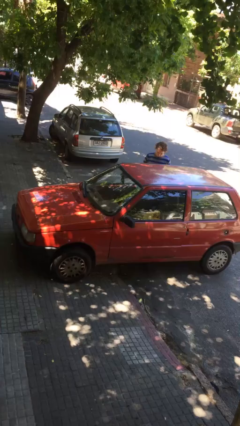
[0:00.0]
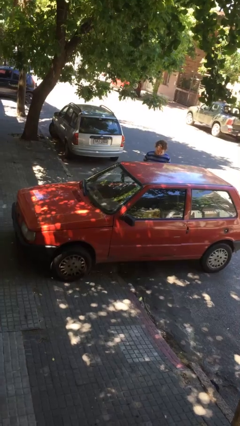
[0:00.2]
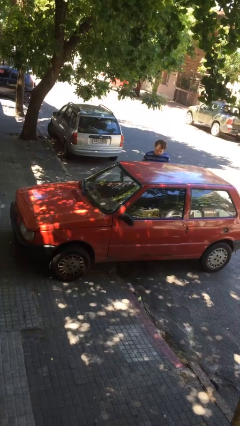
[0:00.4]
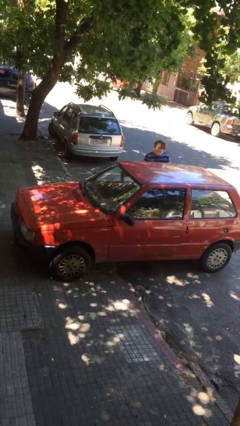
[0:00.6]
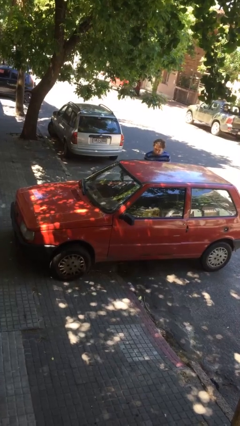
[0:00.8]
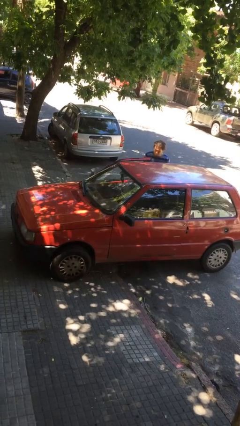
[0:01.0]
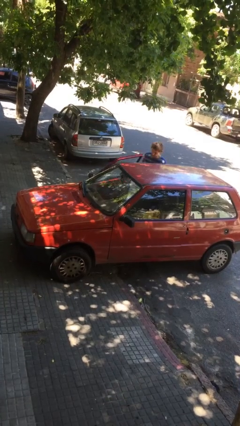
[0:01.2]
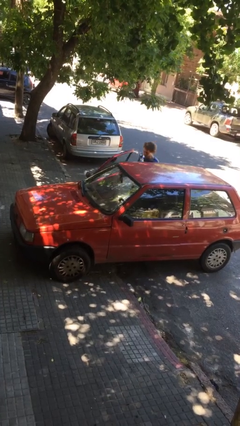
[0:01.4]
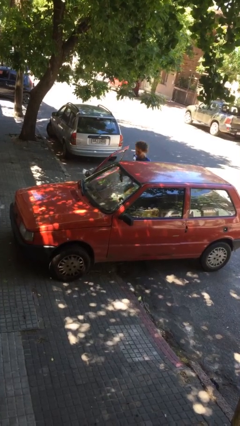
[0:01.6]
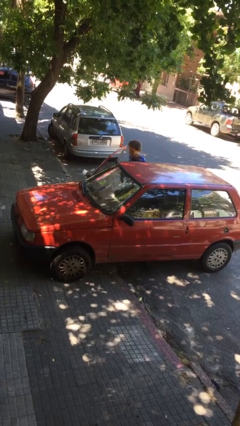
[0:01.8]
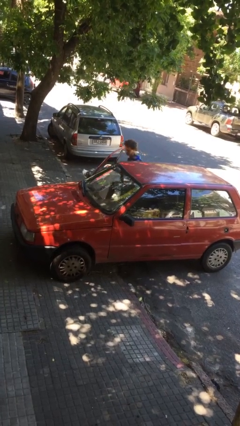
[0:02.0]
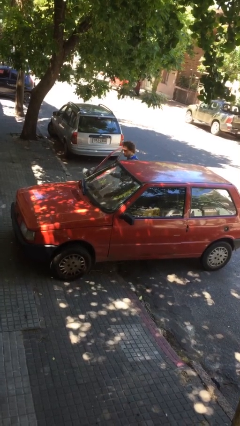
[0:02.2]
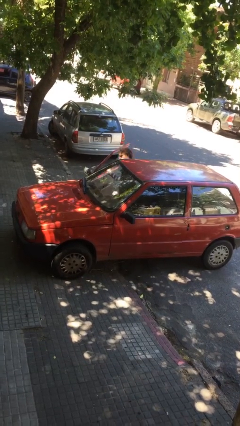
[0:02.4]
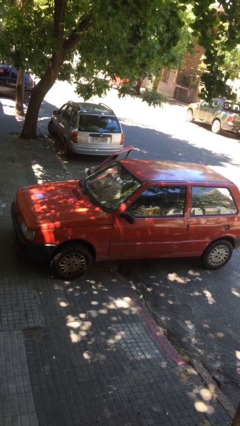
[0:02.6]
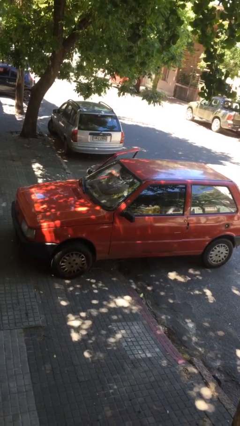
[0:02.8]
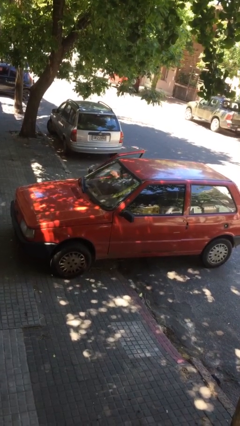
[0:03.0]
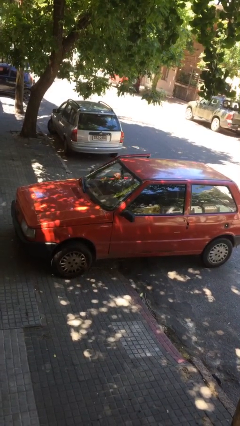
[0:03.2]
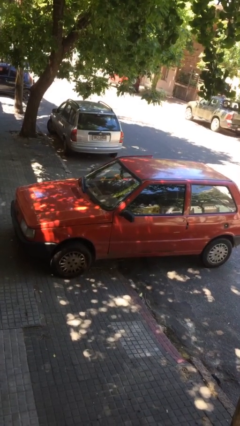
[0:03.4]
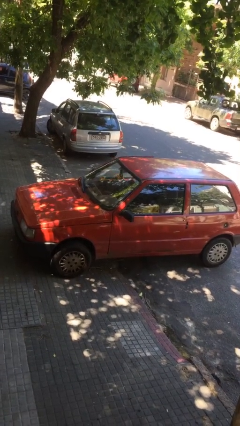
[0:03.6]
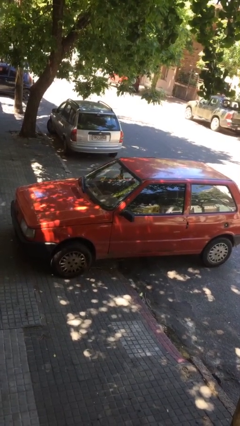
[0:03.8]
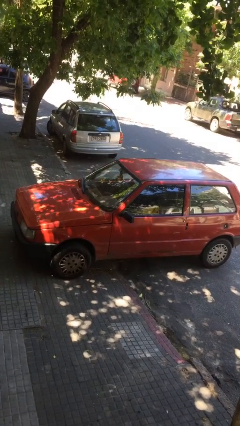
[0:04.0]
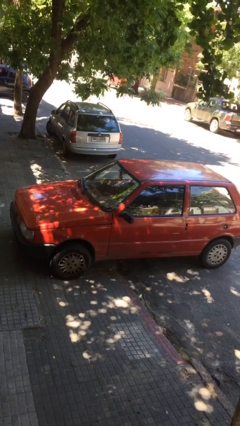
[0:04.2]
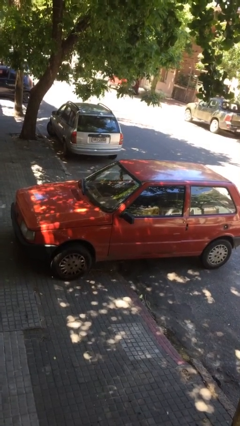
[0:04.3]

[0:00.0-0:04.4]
car picks up person

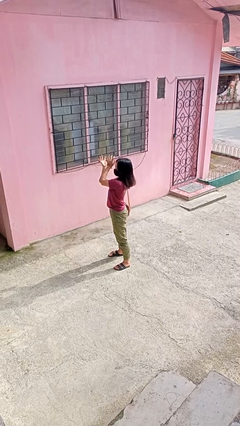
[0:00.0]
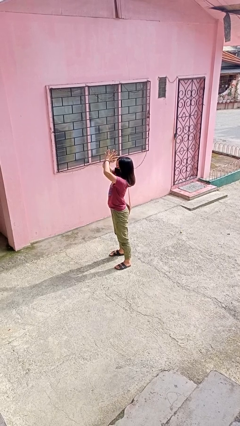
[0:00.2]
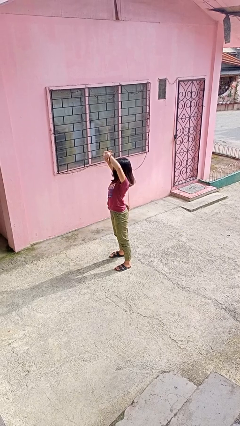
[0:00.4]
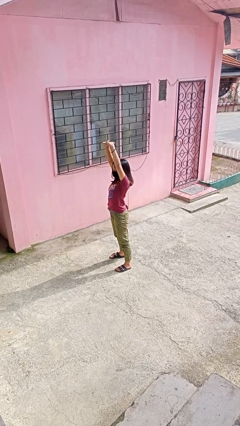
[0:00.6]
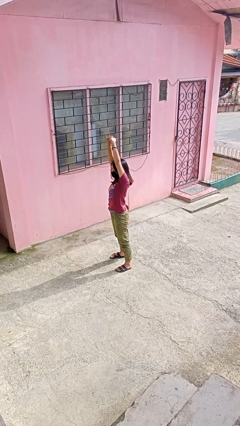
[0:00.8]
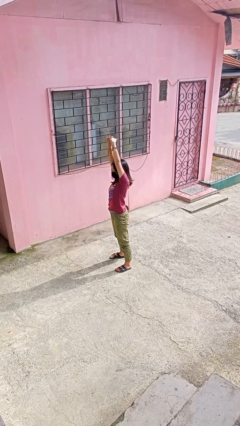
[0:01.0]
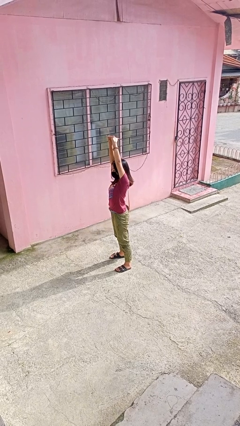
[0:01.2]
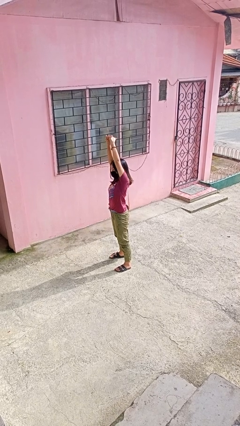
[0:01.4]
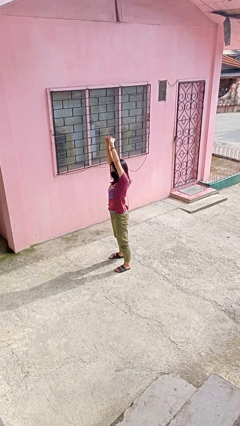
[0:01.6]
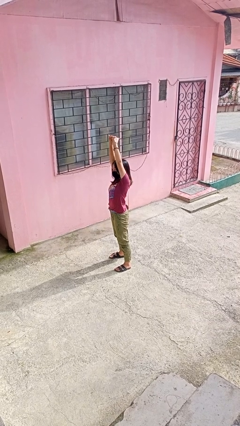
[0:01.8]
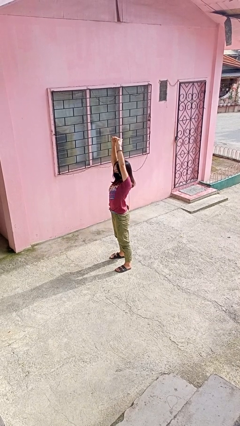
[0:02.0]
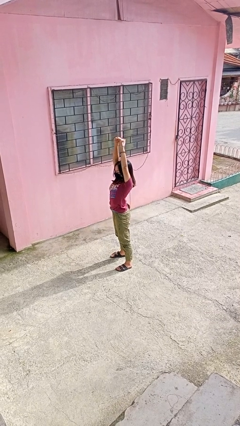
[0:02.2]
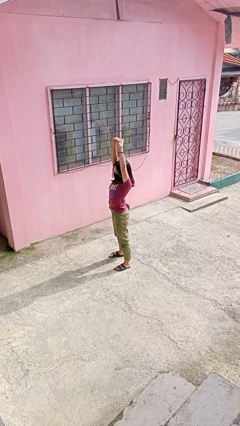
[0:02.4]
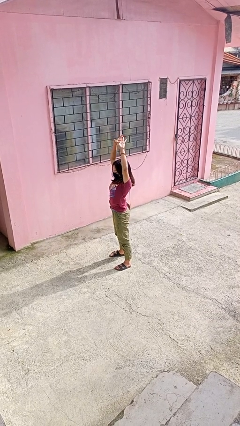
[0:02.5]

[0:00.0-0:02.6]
person stretches arms over head

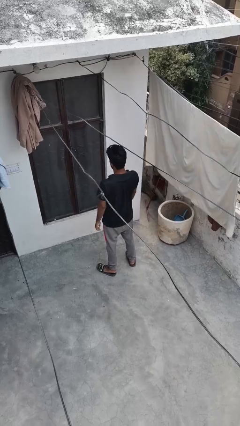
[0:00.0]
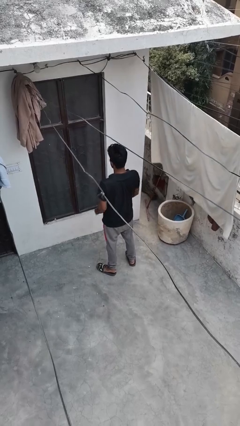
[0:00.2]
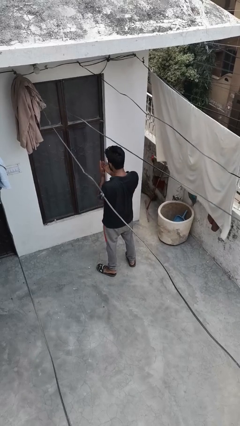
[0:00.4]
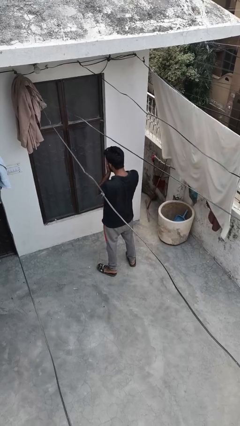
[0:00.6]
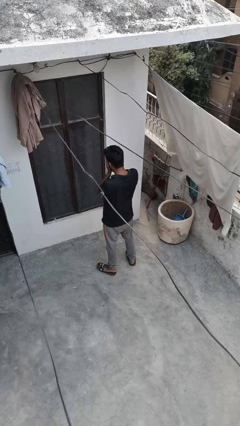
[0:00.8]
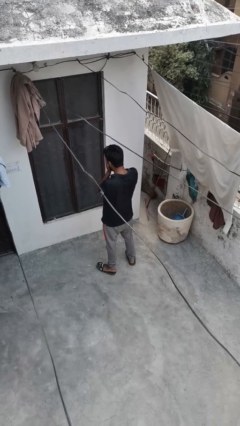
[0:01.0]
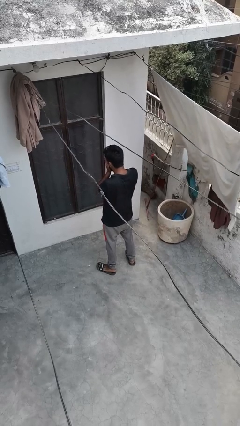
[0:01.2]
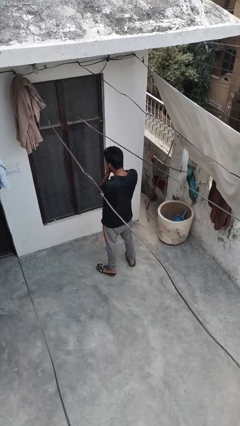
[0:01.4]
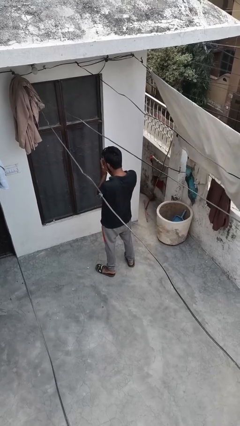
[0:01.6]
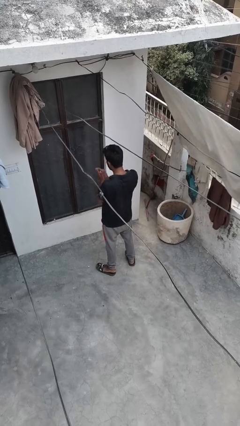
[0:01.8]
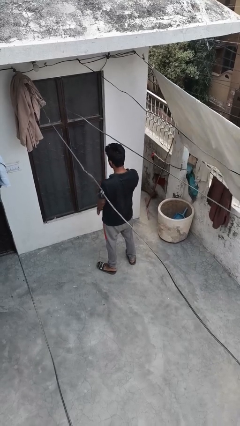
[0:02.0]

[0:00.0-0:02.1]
person covers face with hands

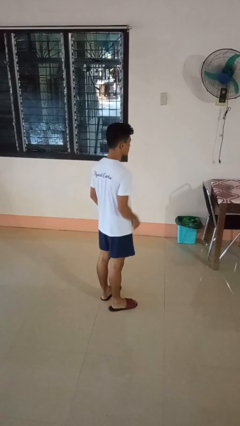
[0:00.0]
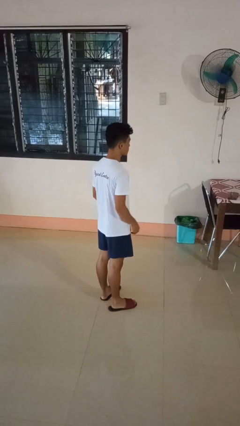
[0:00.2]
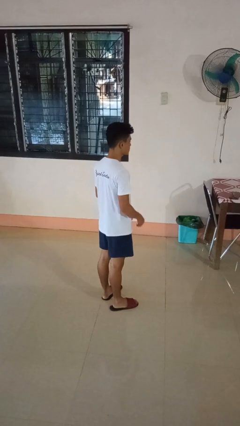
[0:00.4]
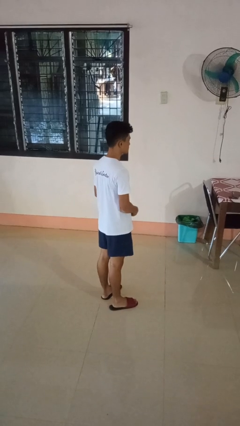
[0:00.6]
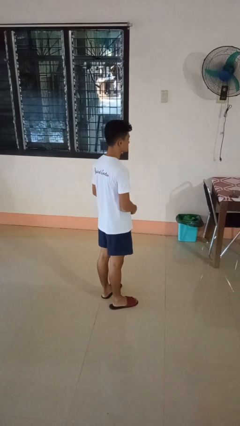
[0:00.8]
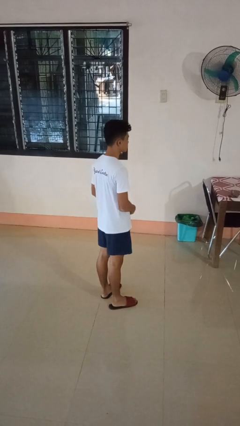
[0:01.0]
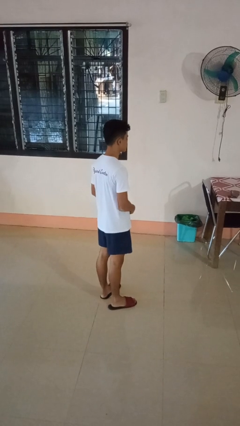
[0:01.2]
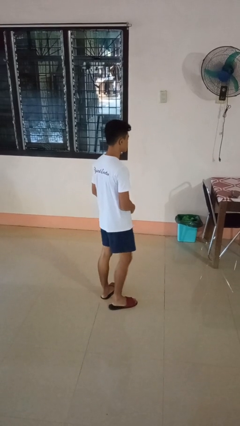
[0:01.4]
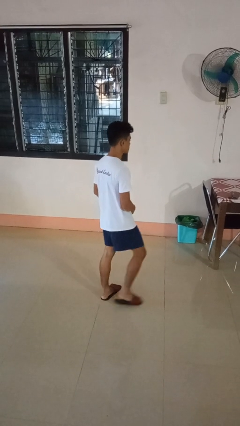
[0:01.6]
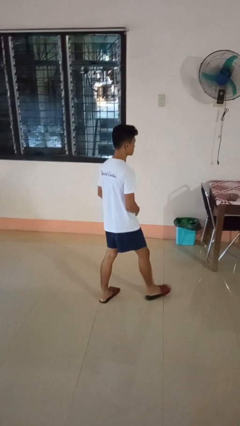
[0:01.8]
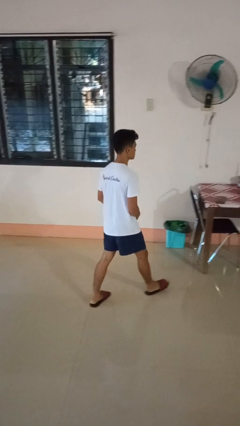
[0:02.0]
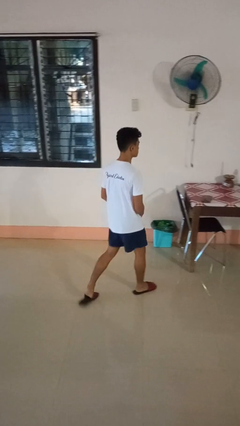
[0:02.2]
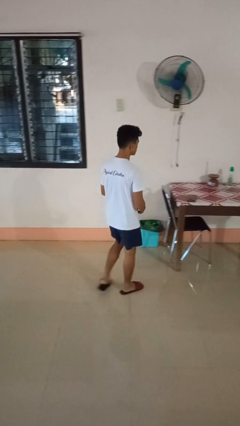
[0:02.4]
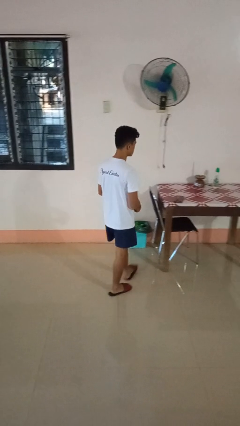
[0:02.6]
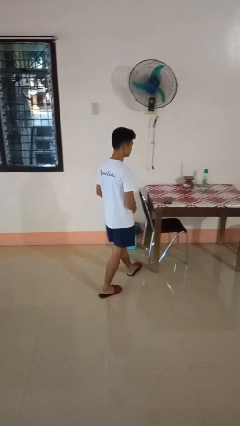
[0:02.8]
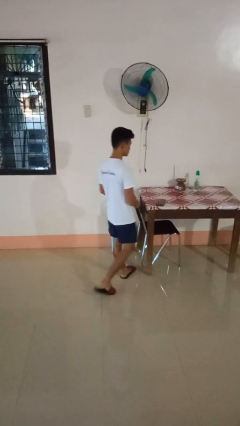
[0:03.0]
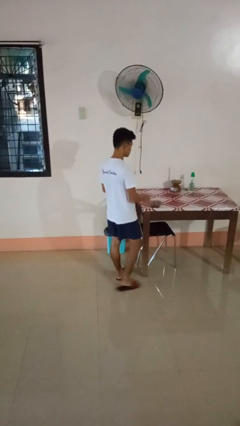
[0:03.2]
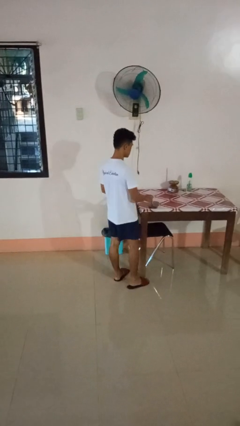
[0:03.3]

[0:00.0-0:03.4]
person throws object on table

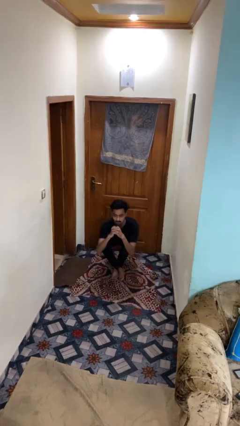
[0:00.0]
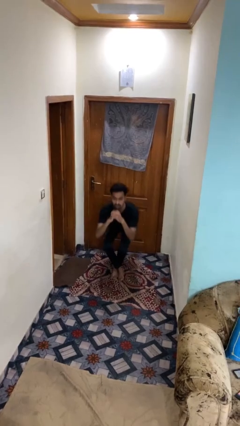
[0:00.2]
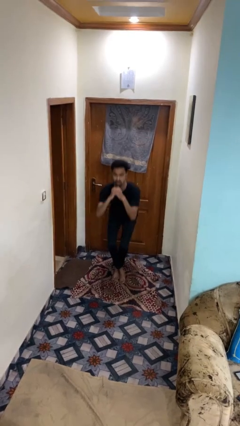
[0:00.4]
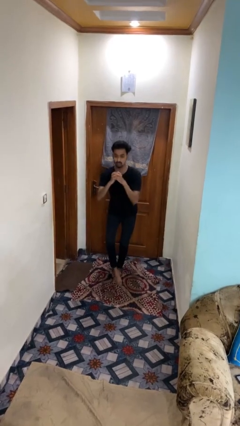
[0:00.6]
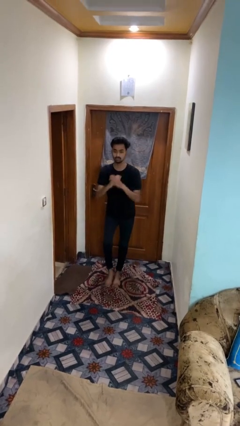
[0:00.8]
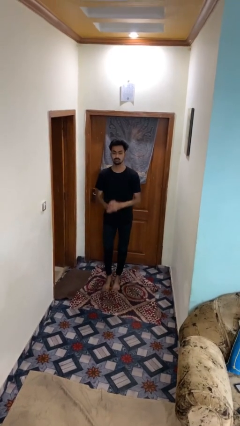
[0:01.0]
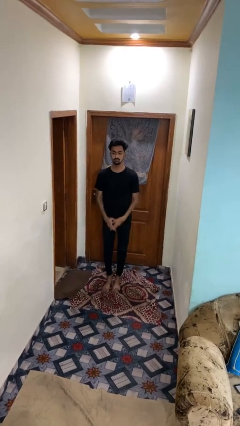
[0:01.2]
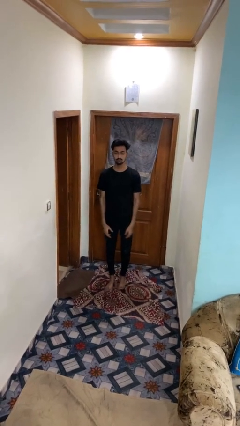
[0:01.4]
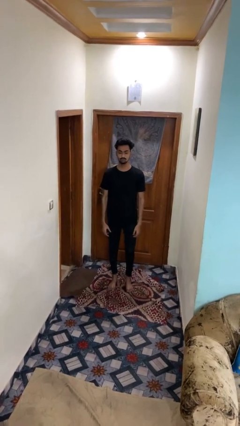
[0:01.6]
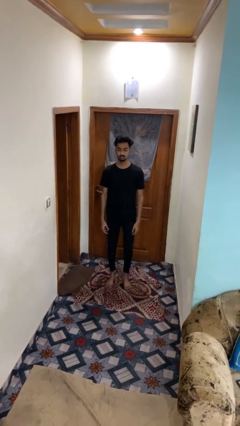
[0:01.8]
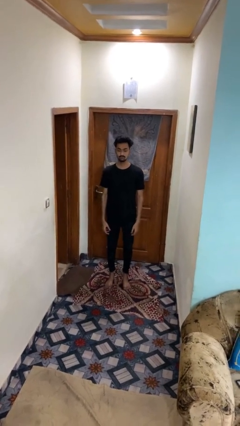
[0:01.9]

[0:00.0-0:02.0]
person stands up from floor

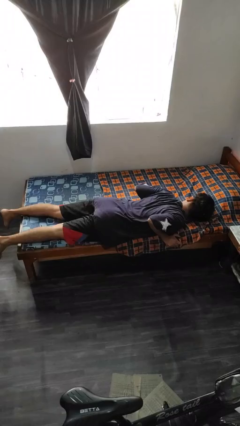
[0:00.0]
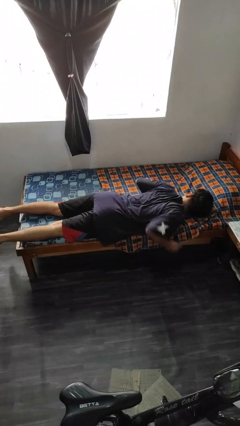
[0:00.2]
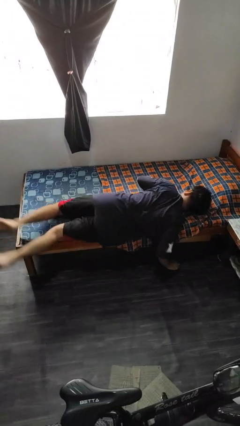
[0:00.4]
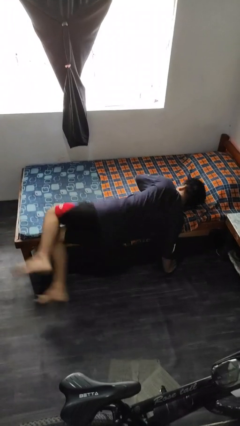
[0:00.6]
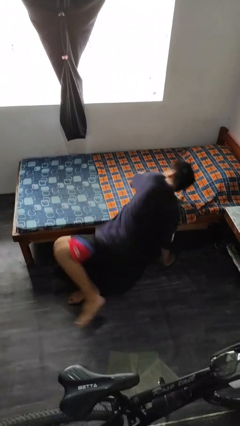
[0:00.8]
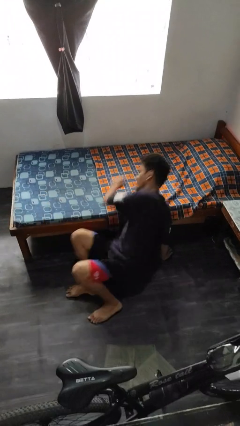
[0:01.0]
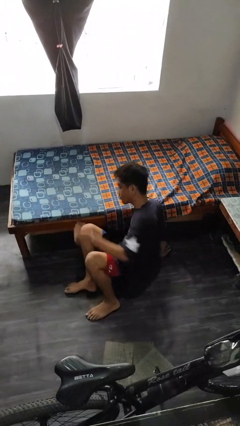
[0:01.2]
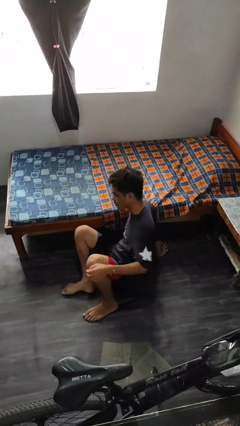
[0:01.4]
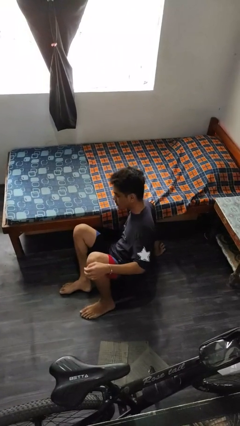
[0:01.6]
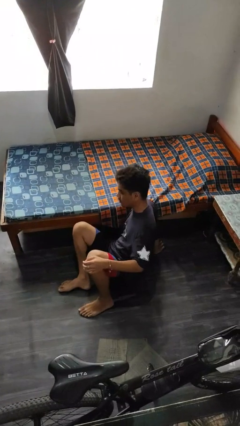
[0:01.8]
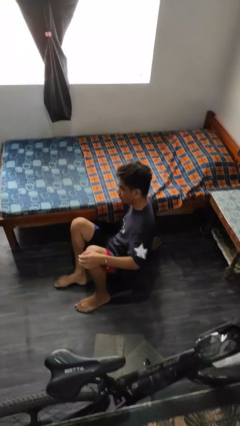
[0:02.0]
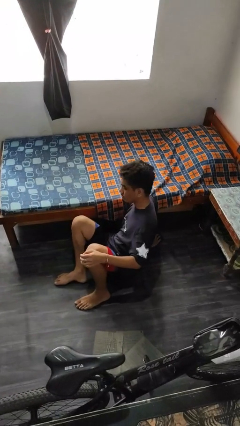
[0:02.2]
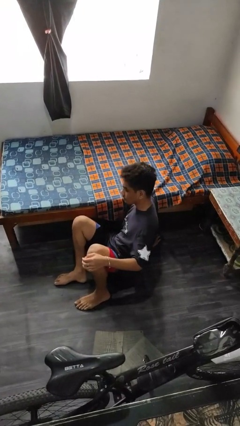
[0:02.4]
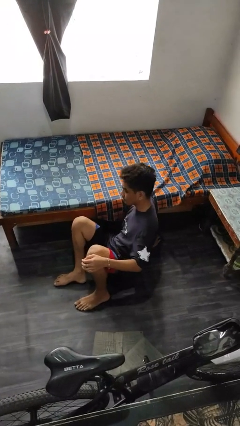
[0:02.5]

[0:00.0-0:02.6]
person falls from bed
